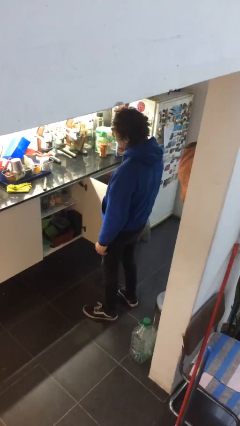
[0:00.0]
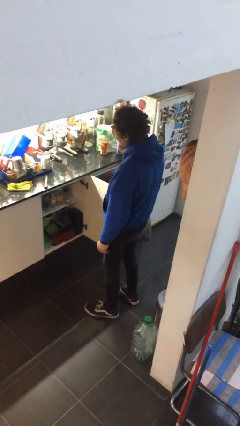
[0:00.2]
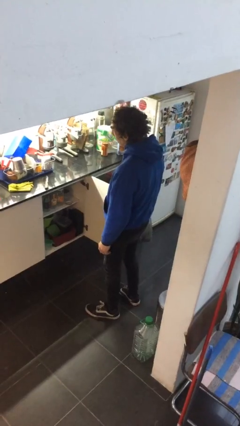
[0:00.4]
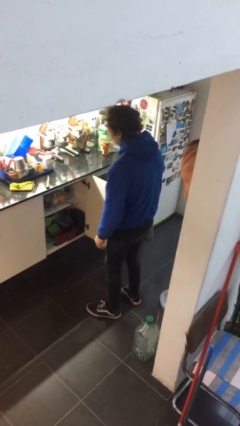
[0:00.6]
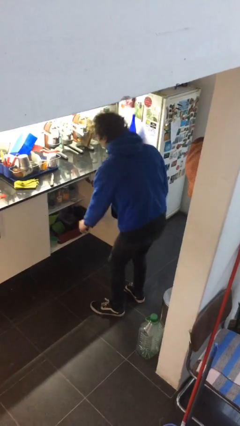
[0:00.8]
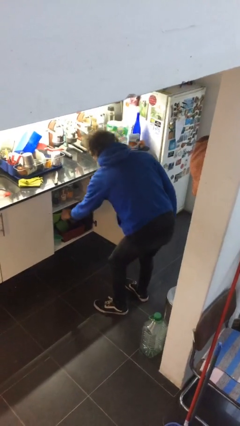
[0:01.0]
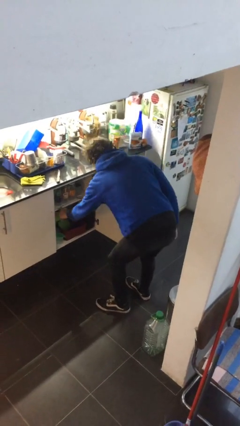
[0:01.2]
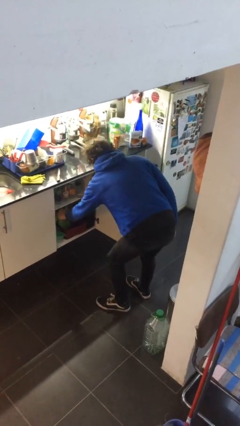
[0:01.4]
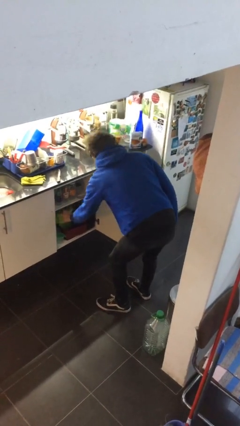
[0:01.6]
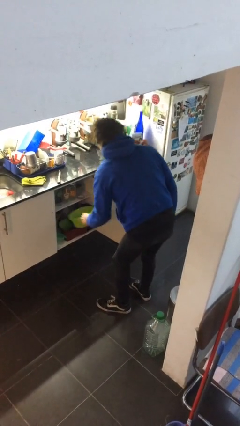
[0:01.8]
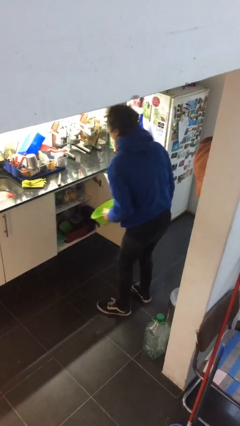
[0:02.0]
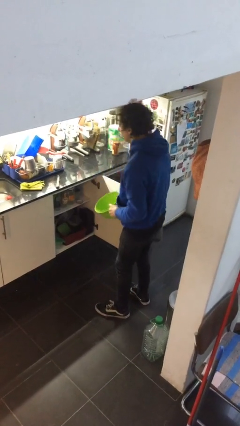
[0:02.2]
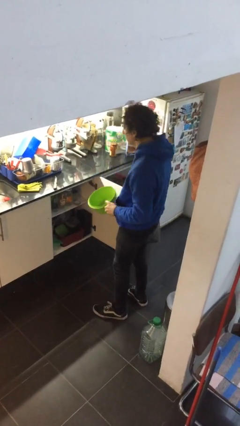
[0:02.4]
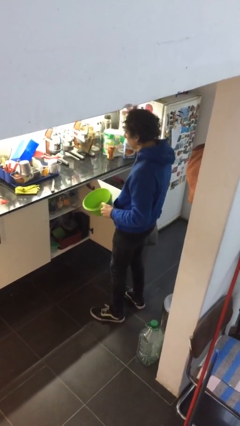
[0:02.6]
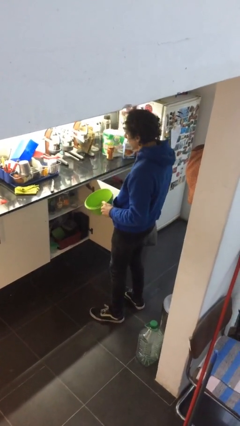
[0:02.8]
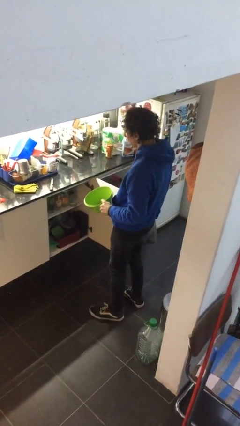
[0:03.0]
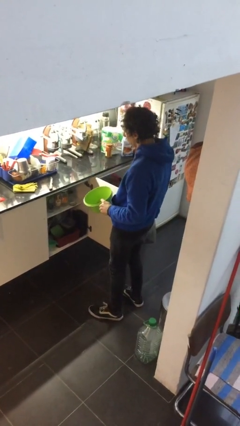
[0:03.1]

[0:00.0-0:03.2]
person picks up object from cabinet

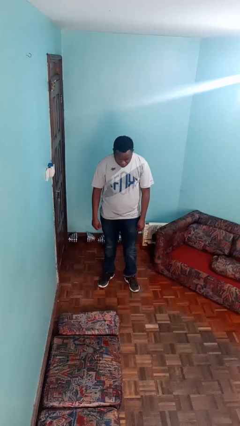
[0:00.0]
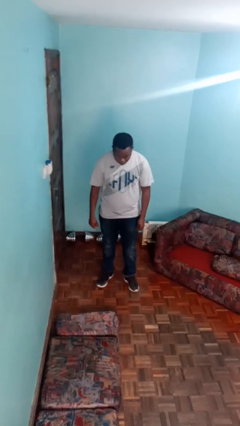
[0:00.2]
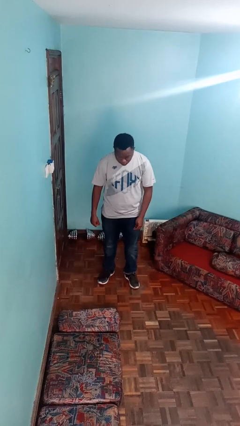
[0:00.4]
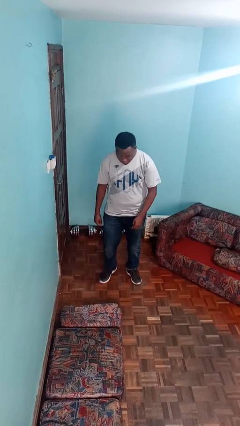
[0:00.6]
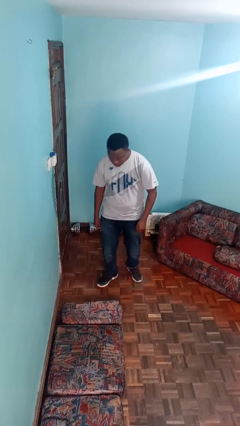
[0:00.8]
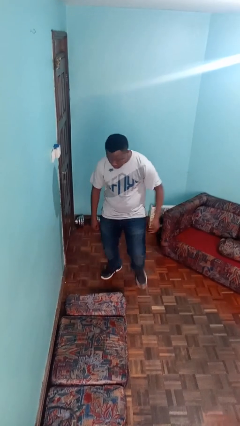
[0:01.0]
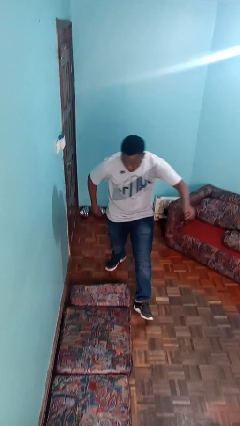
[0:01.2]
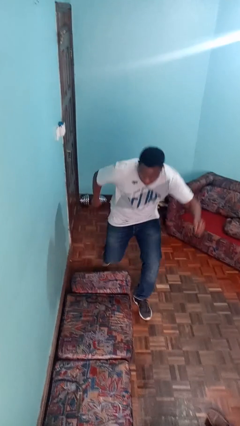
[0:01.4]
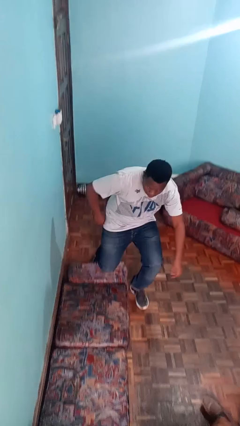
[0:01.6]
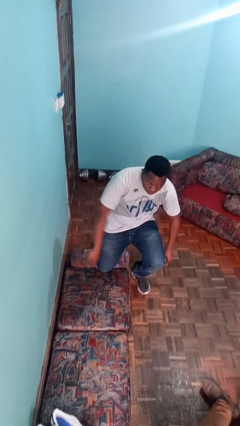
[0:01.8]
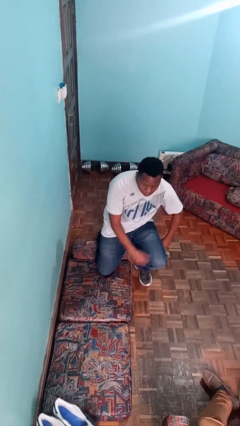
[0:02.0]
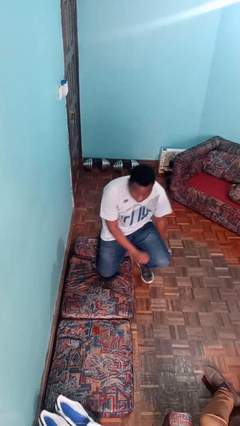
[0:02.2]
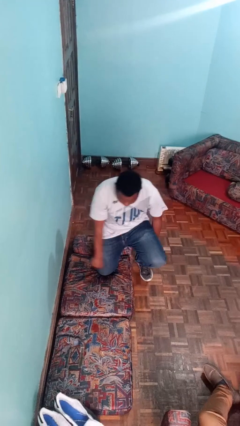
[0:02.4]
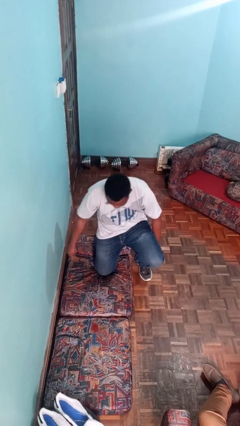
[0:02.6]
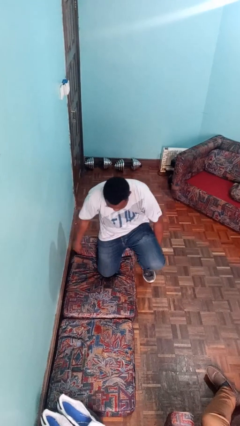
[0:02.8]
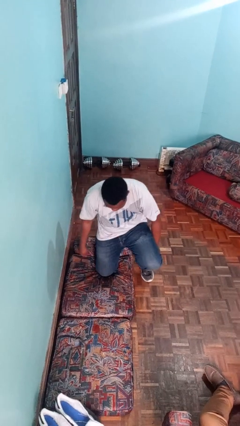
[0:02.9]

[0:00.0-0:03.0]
person trips on object on floor

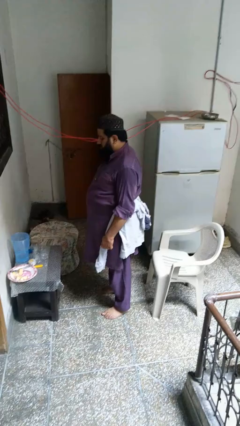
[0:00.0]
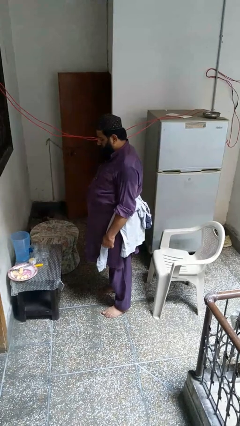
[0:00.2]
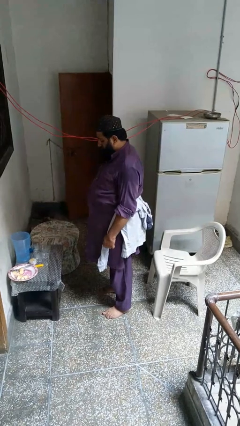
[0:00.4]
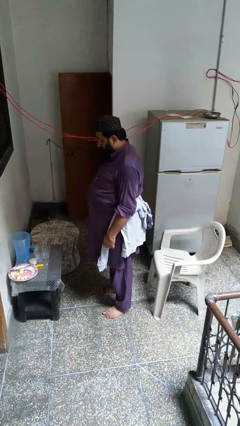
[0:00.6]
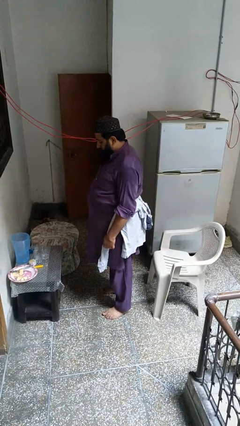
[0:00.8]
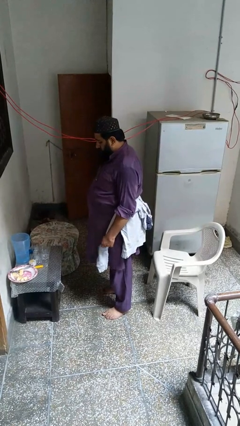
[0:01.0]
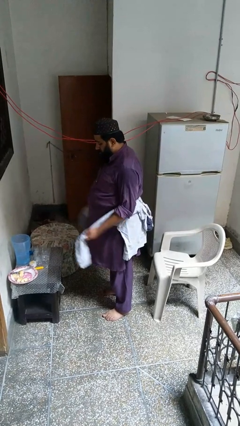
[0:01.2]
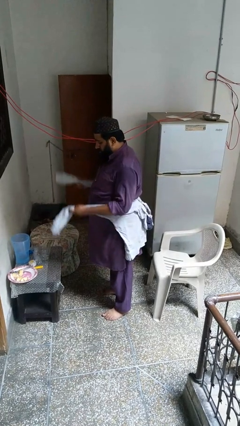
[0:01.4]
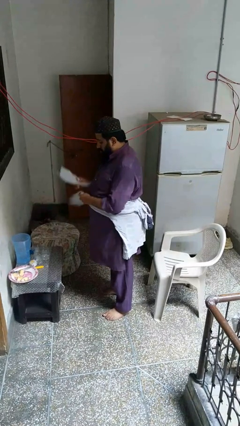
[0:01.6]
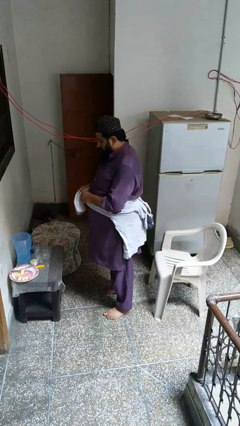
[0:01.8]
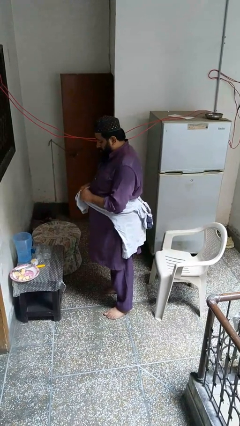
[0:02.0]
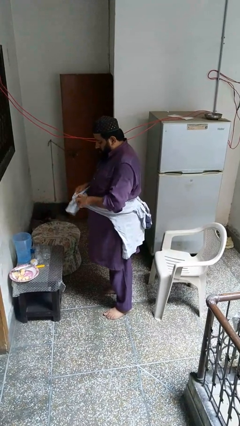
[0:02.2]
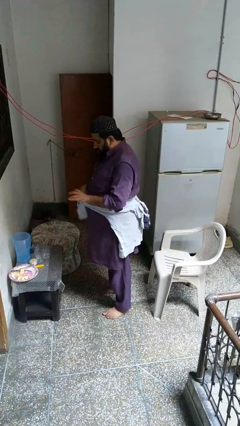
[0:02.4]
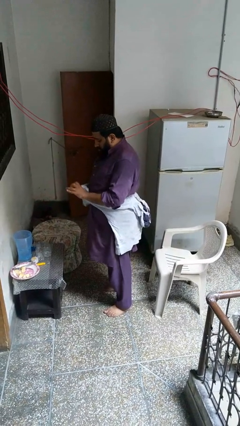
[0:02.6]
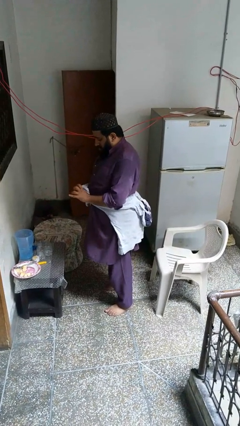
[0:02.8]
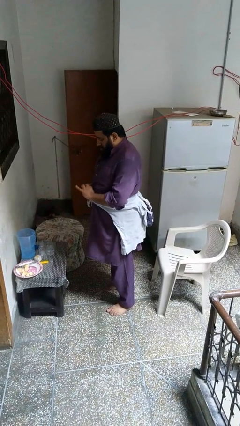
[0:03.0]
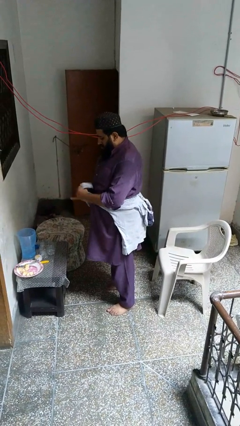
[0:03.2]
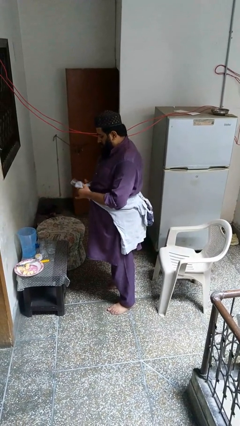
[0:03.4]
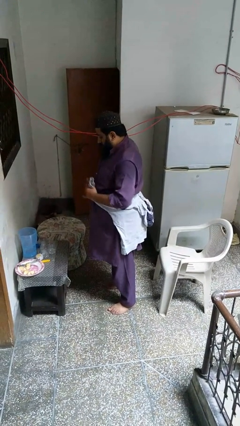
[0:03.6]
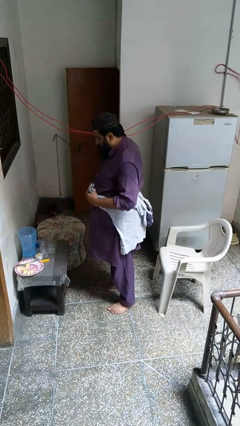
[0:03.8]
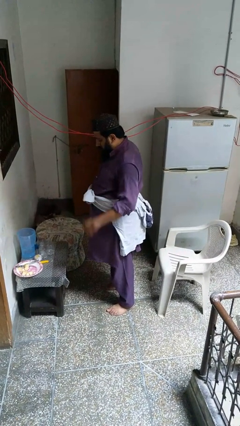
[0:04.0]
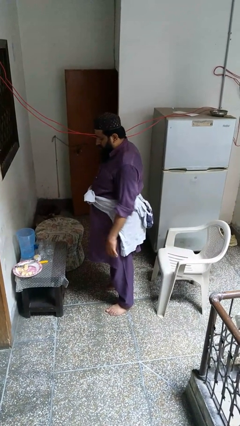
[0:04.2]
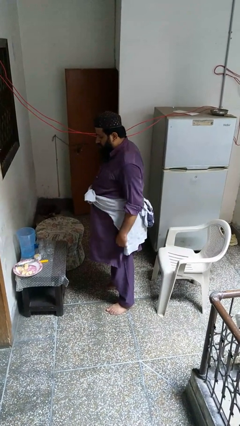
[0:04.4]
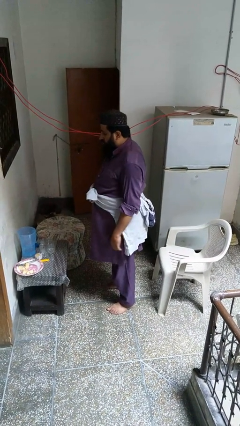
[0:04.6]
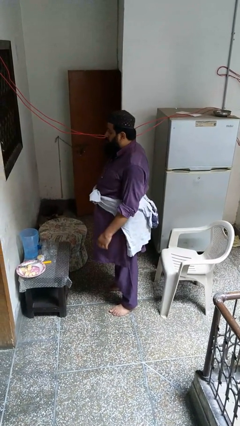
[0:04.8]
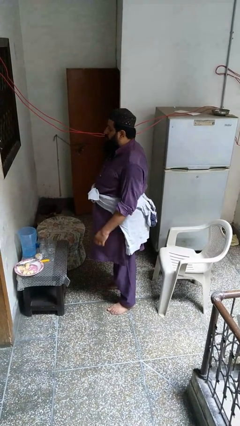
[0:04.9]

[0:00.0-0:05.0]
person ties jacket around waist

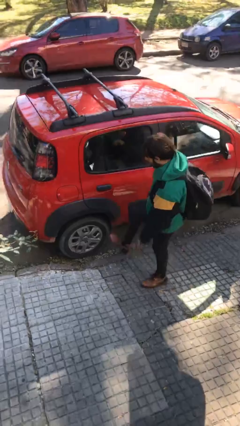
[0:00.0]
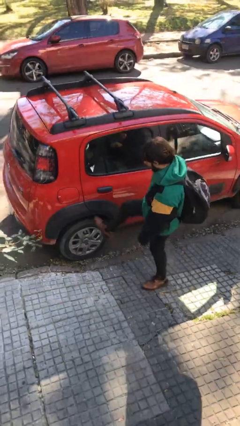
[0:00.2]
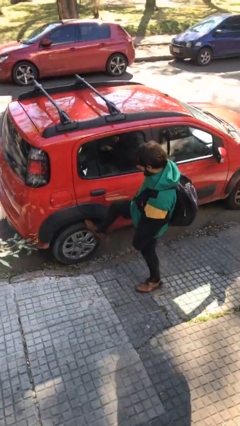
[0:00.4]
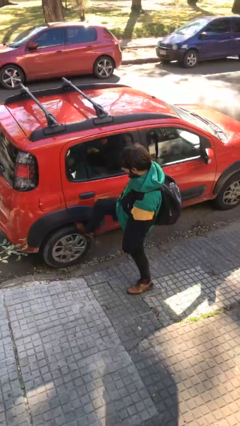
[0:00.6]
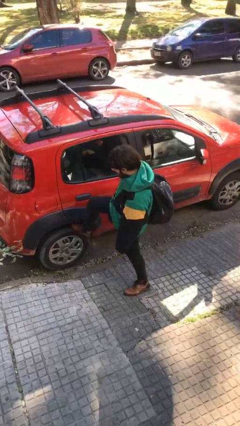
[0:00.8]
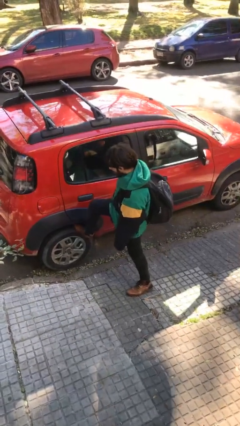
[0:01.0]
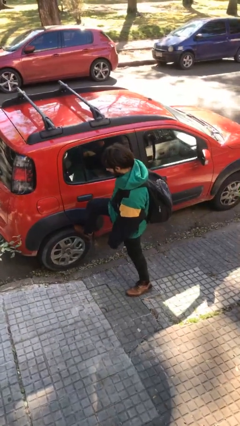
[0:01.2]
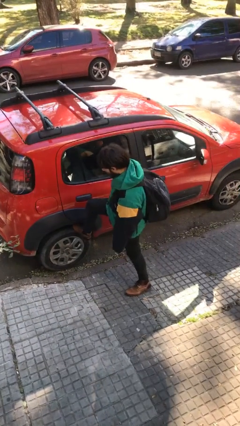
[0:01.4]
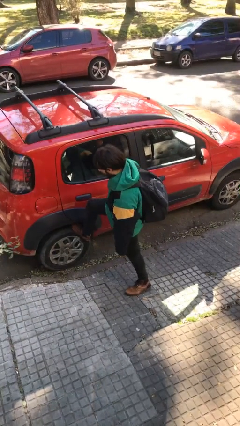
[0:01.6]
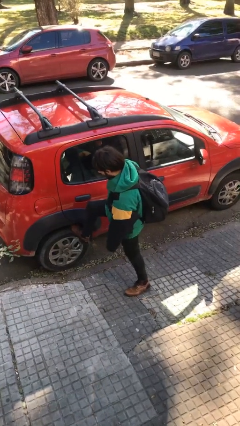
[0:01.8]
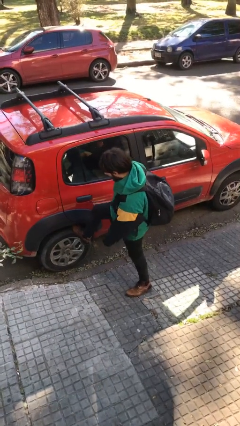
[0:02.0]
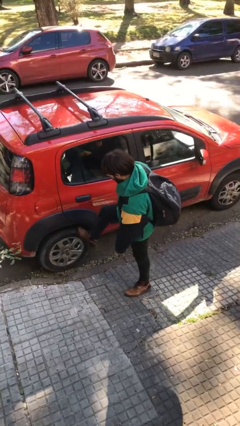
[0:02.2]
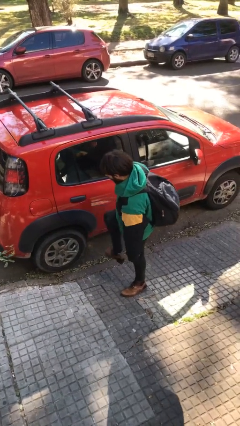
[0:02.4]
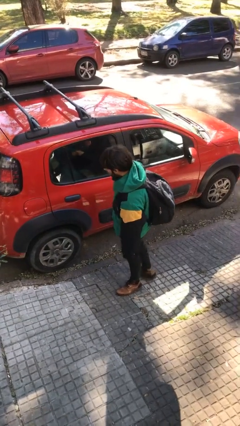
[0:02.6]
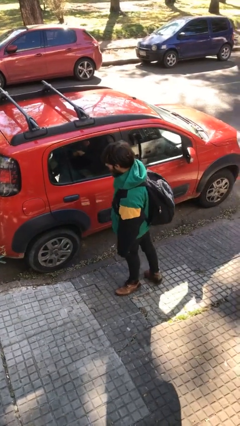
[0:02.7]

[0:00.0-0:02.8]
person kicks car tires

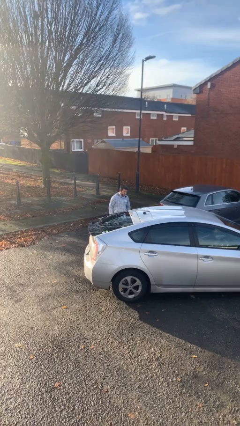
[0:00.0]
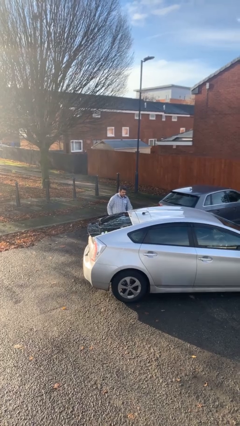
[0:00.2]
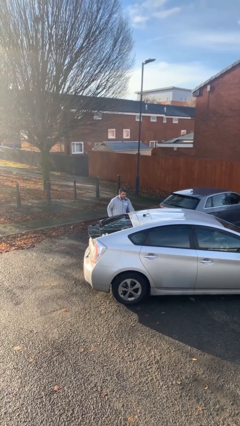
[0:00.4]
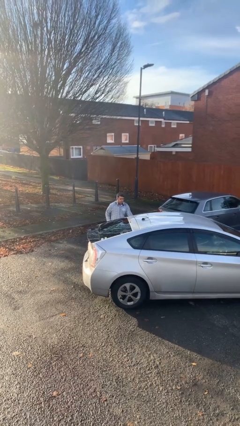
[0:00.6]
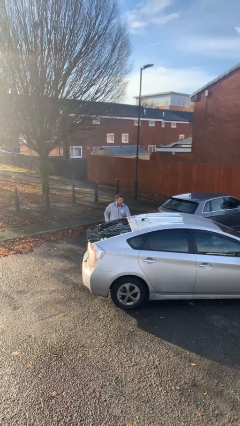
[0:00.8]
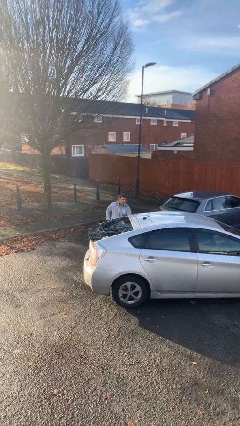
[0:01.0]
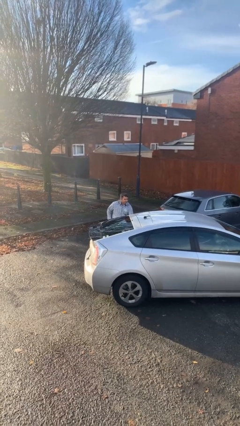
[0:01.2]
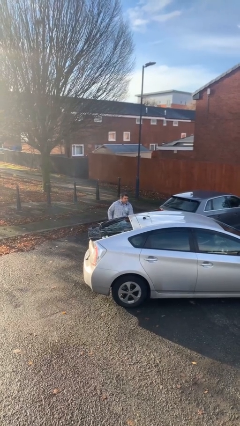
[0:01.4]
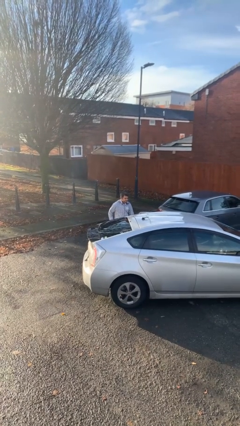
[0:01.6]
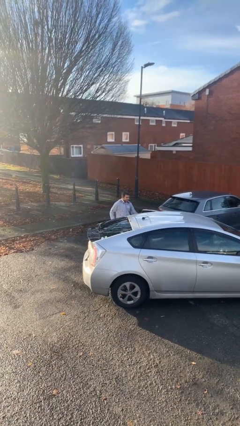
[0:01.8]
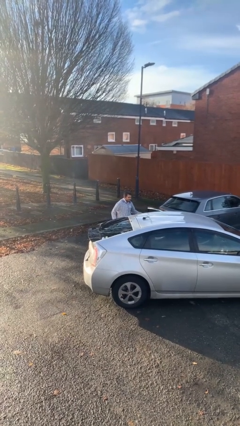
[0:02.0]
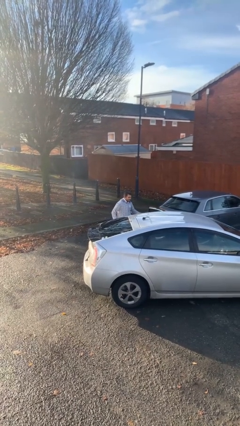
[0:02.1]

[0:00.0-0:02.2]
person opens car door

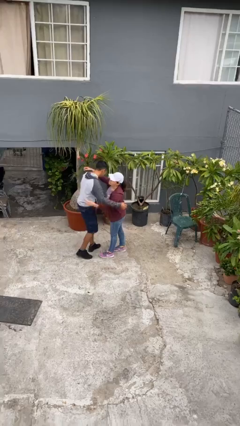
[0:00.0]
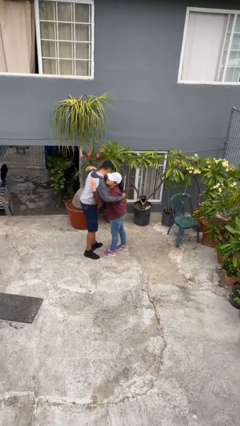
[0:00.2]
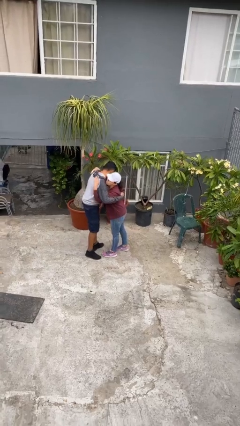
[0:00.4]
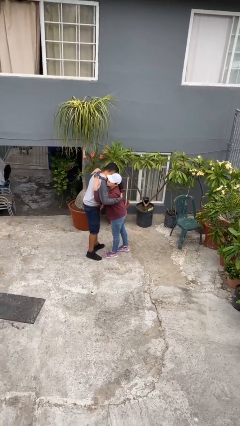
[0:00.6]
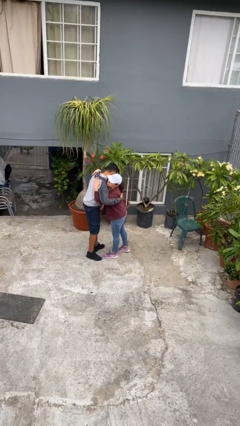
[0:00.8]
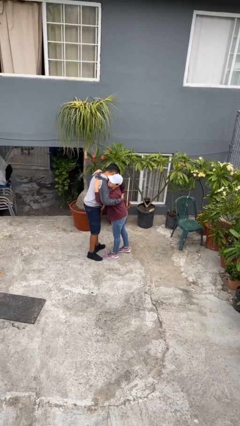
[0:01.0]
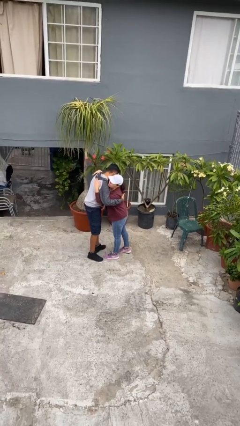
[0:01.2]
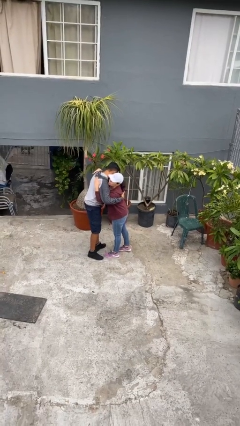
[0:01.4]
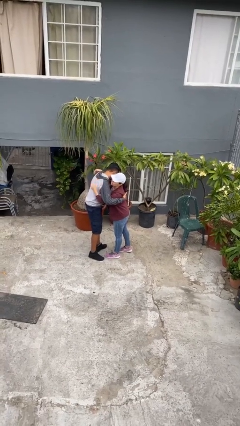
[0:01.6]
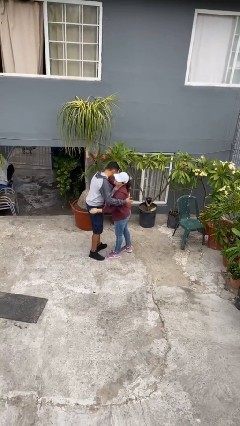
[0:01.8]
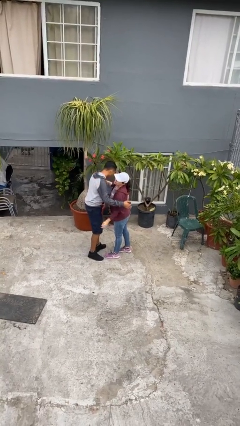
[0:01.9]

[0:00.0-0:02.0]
person embraces person
